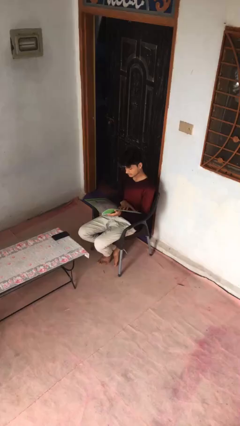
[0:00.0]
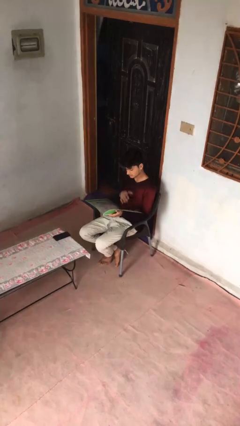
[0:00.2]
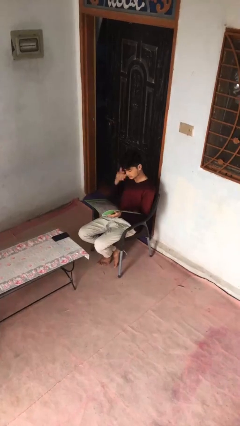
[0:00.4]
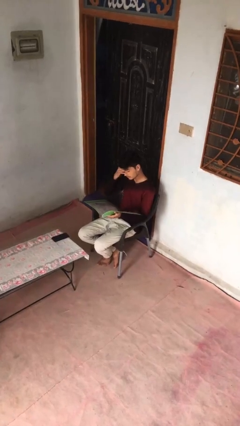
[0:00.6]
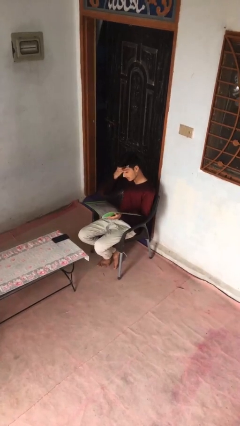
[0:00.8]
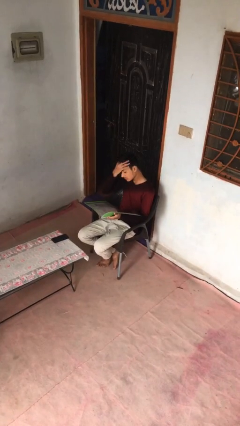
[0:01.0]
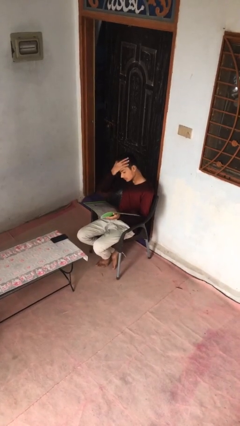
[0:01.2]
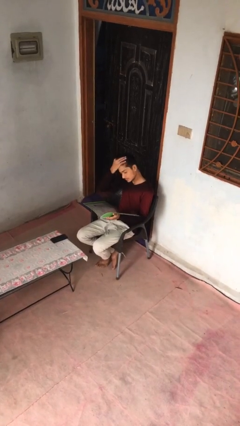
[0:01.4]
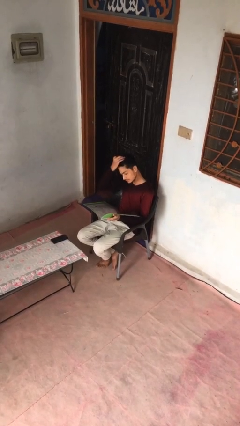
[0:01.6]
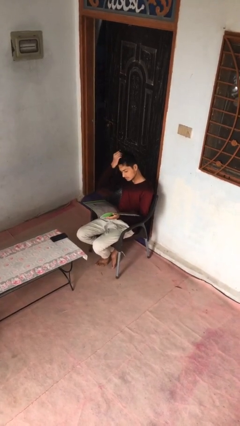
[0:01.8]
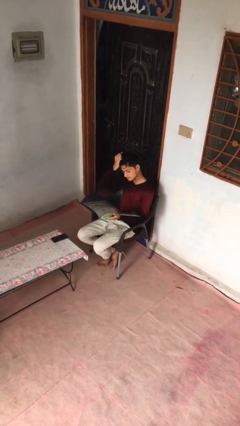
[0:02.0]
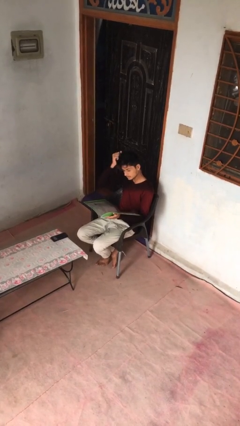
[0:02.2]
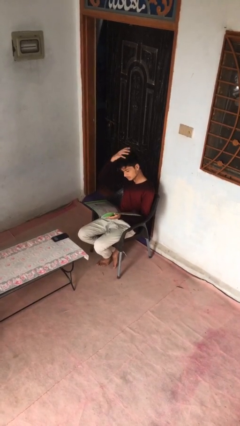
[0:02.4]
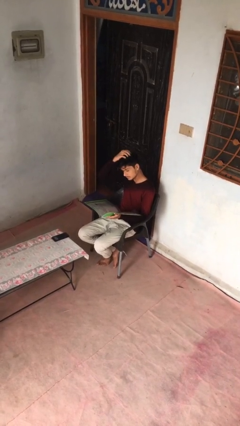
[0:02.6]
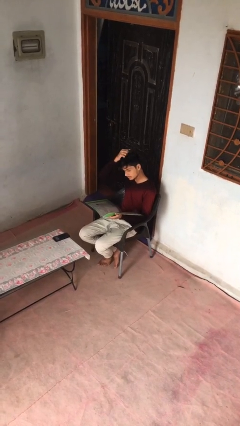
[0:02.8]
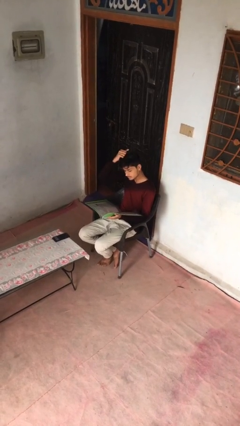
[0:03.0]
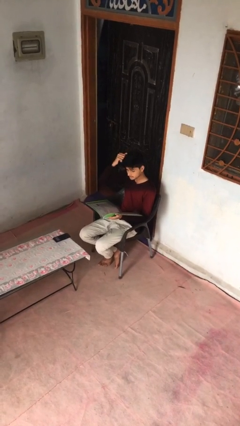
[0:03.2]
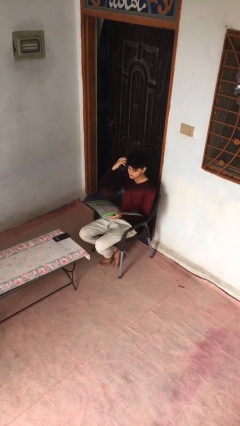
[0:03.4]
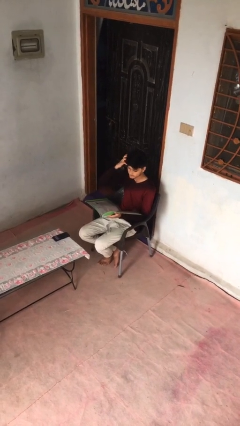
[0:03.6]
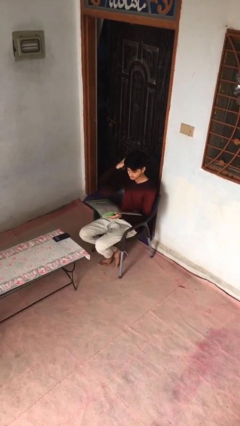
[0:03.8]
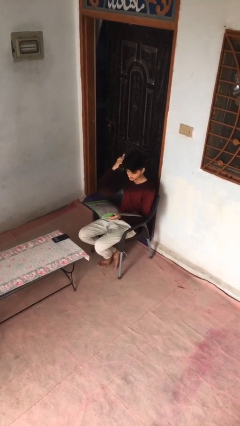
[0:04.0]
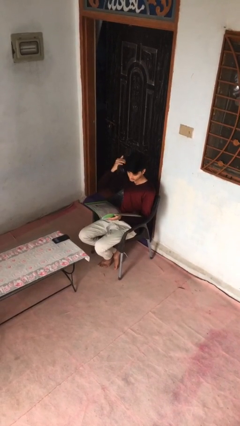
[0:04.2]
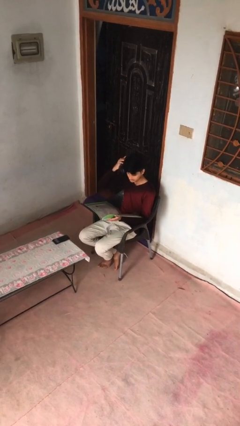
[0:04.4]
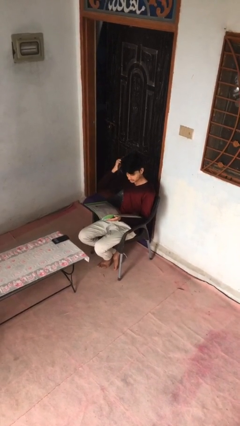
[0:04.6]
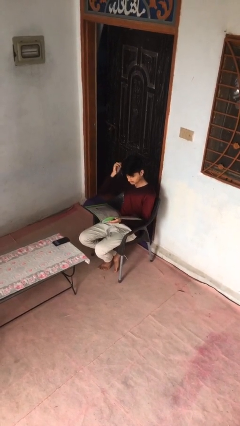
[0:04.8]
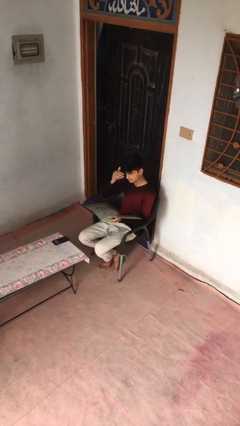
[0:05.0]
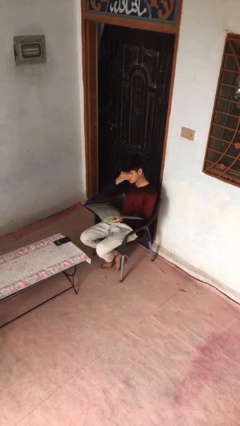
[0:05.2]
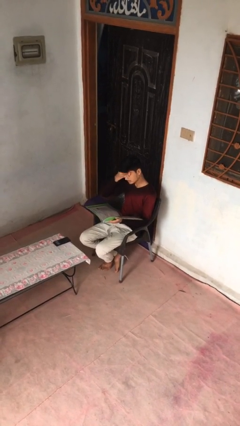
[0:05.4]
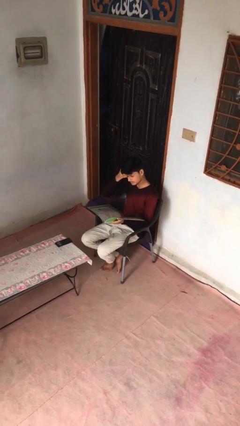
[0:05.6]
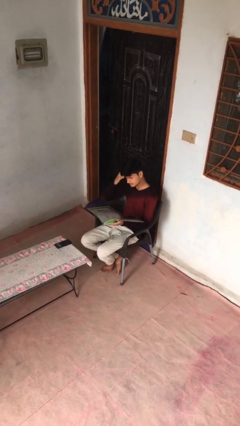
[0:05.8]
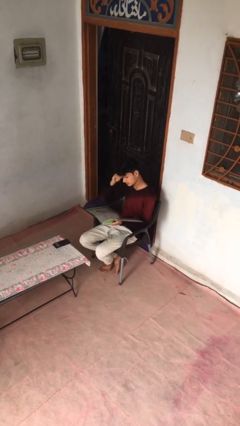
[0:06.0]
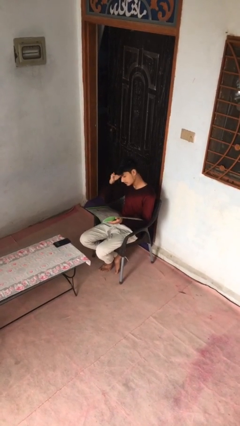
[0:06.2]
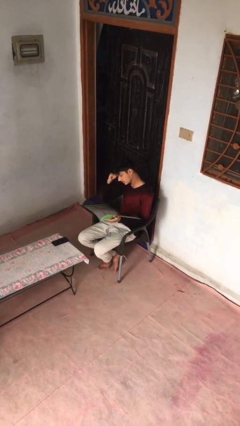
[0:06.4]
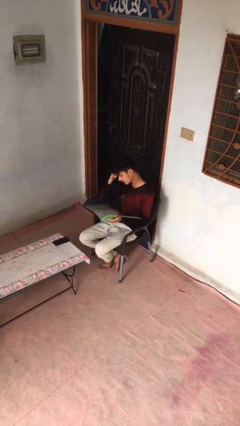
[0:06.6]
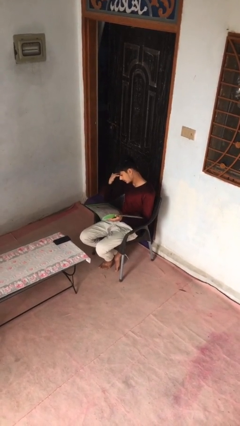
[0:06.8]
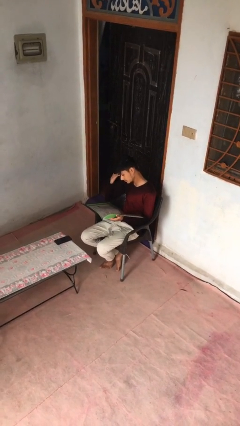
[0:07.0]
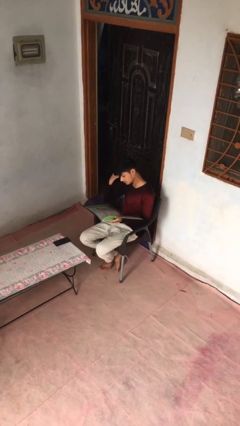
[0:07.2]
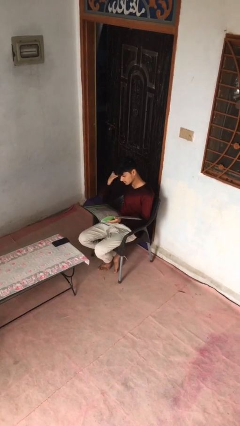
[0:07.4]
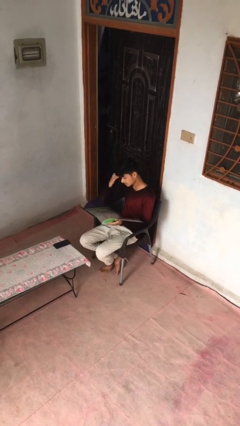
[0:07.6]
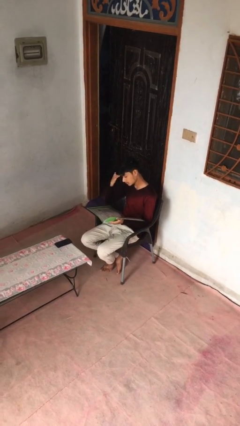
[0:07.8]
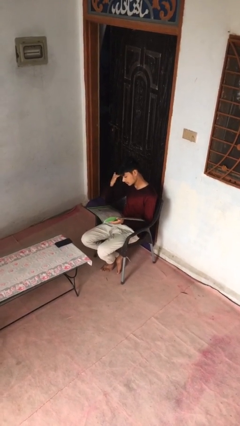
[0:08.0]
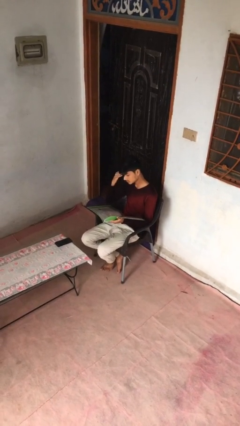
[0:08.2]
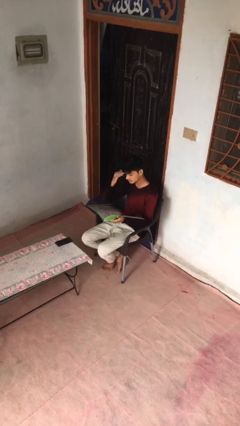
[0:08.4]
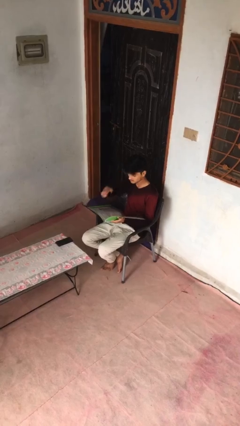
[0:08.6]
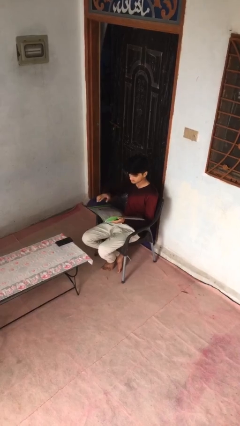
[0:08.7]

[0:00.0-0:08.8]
person reads document

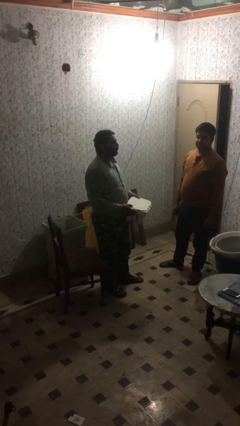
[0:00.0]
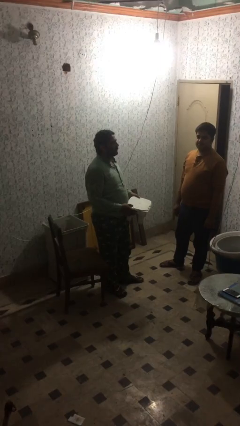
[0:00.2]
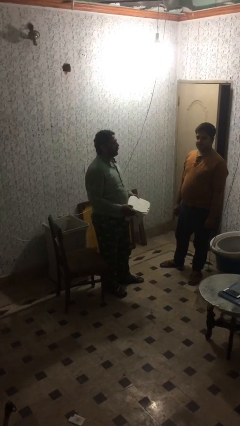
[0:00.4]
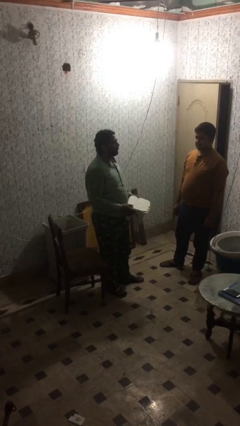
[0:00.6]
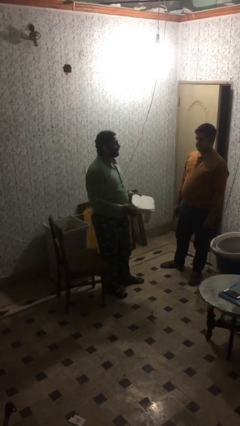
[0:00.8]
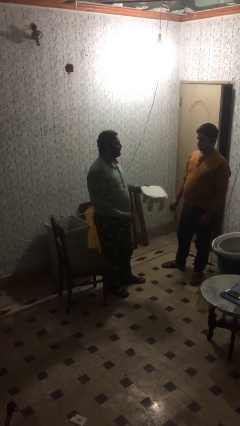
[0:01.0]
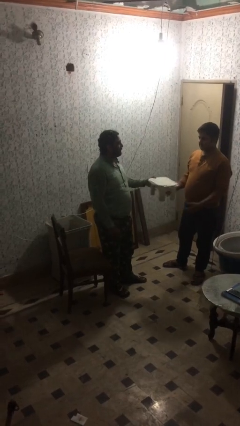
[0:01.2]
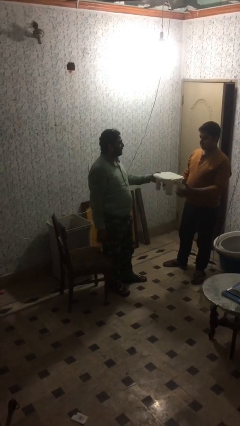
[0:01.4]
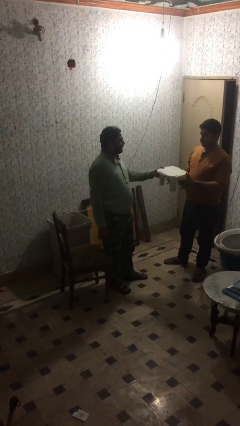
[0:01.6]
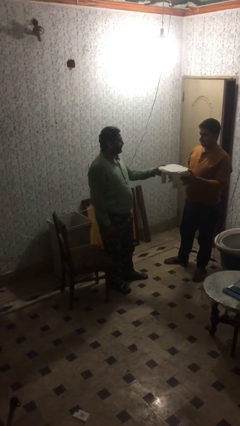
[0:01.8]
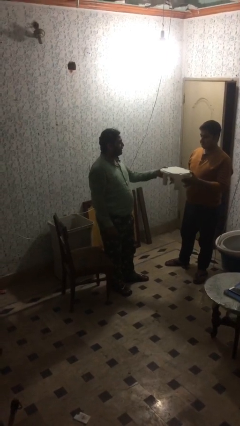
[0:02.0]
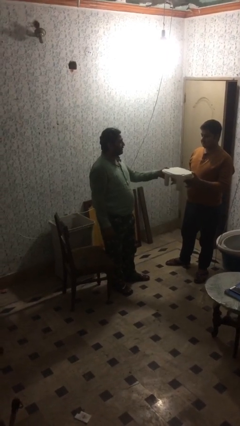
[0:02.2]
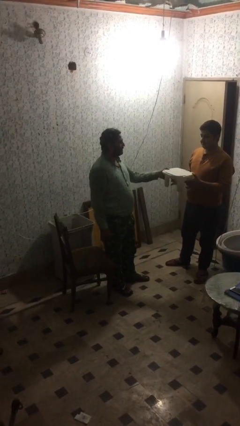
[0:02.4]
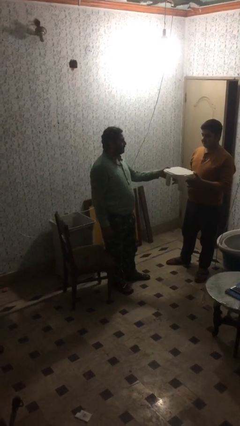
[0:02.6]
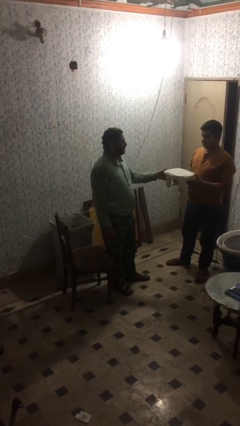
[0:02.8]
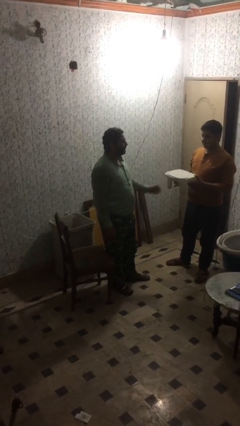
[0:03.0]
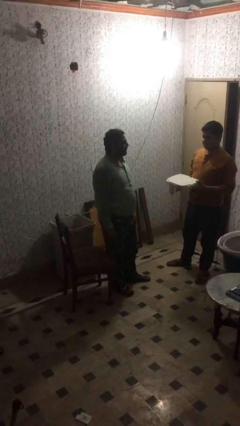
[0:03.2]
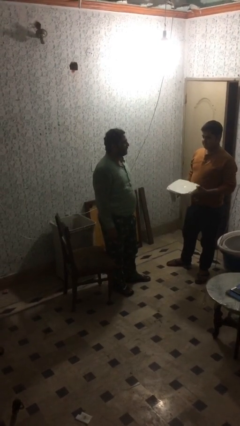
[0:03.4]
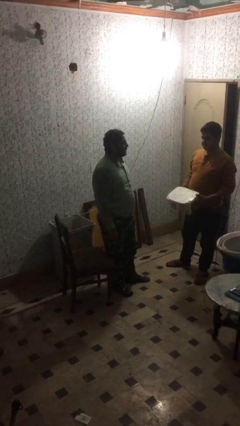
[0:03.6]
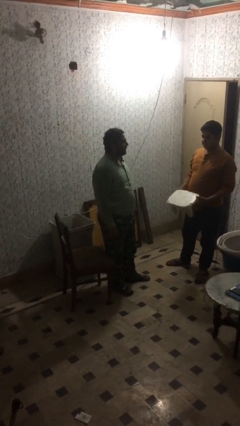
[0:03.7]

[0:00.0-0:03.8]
person transfers object to person

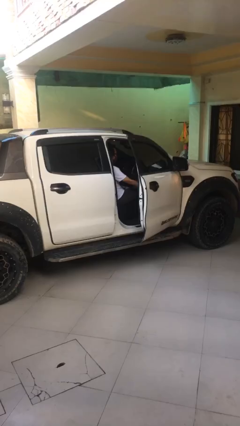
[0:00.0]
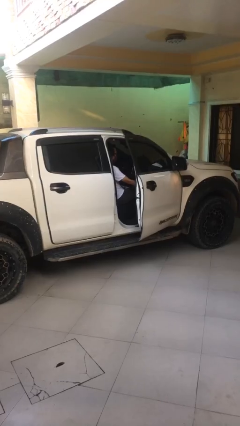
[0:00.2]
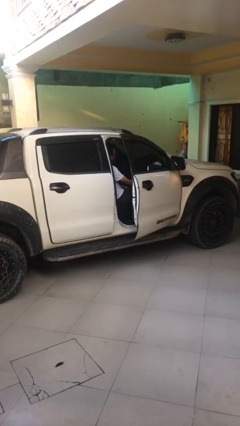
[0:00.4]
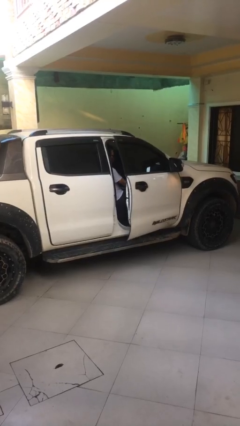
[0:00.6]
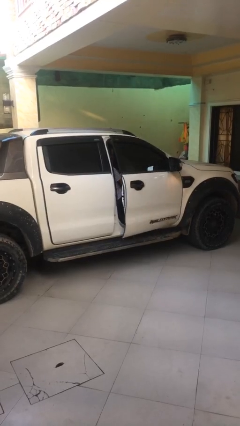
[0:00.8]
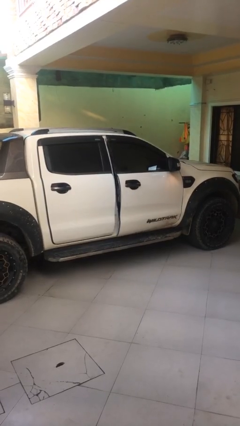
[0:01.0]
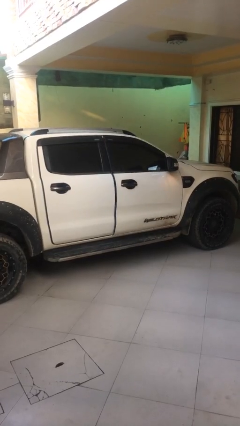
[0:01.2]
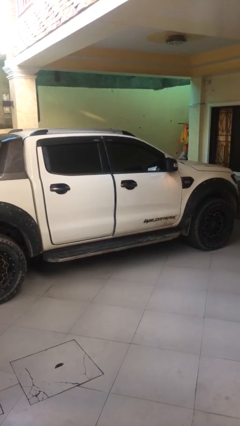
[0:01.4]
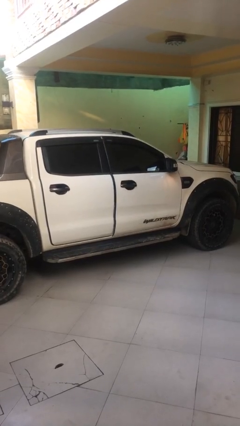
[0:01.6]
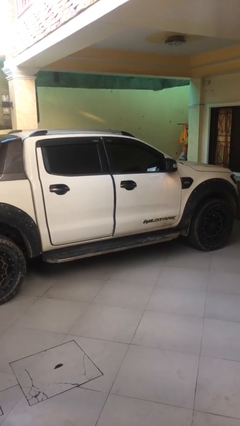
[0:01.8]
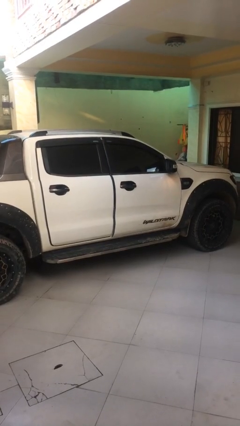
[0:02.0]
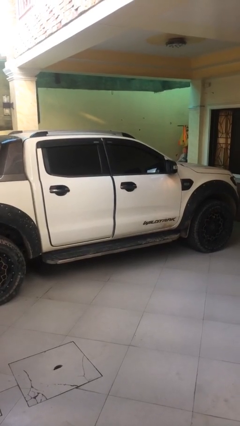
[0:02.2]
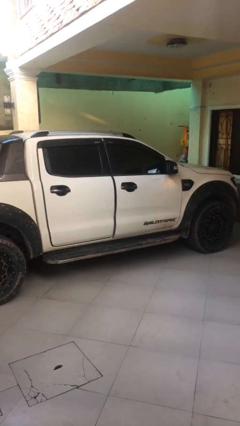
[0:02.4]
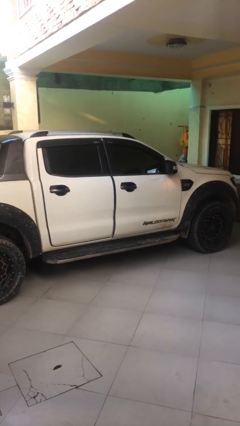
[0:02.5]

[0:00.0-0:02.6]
person closes car door

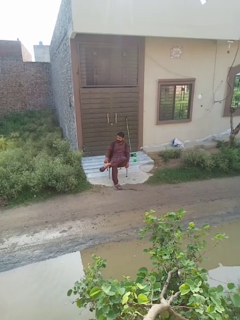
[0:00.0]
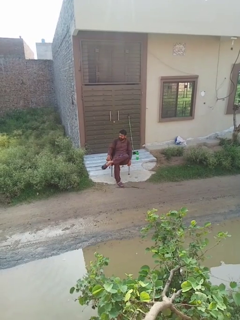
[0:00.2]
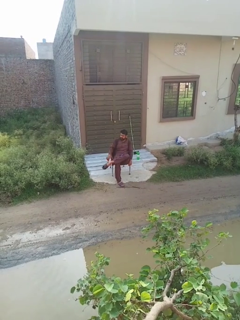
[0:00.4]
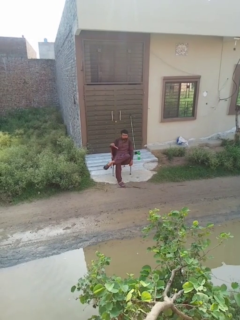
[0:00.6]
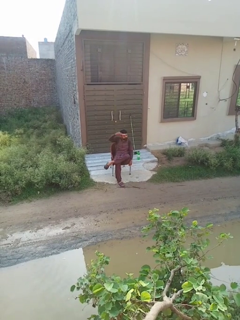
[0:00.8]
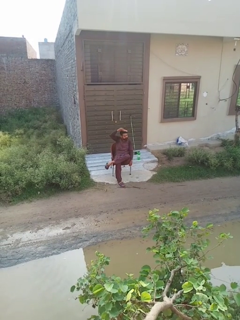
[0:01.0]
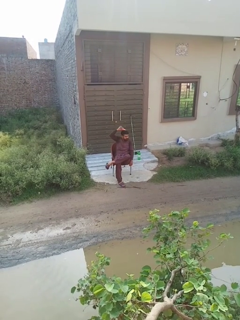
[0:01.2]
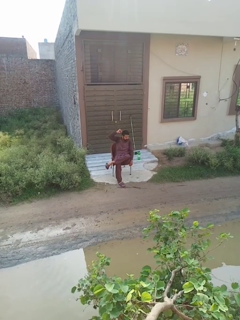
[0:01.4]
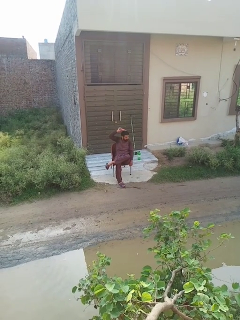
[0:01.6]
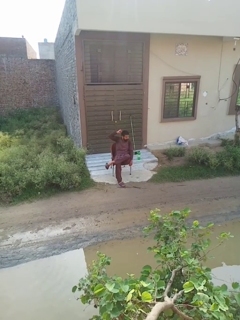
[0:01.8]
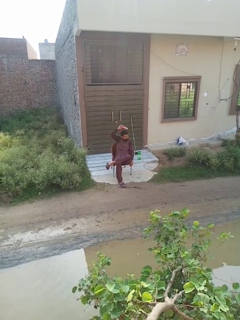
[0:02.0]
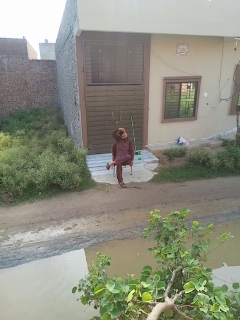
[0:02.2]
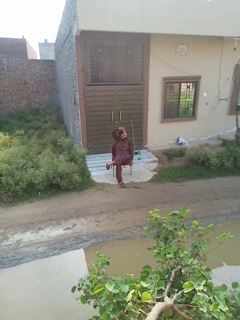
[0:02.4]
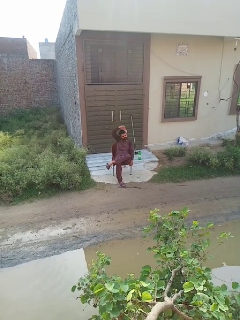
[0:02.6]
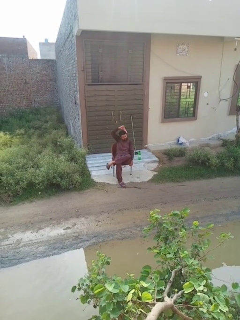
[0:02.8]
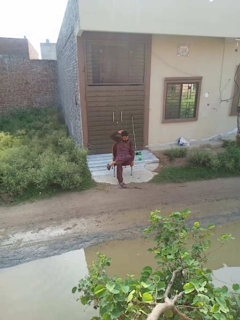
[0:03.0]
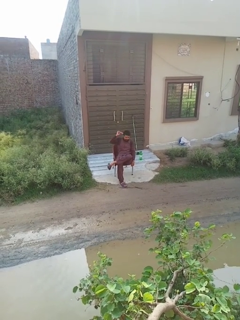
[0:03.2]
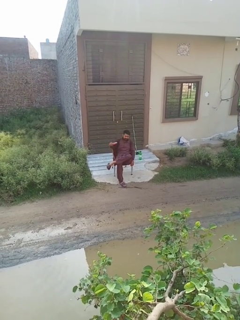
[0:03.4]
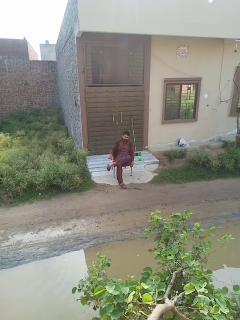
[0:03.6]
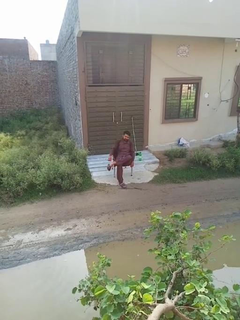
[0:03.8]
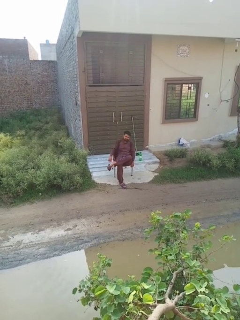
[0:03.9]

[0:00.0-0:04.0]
person brushes hair
